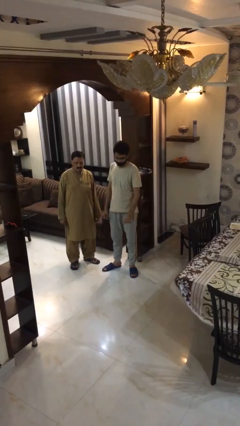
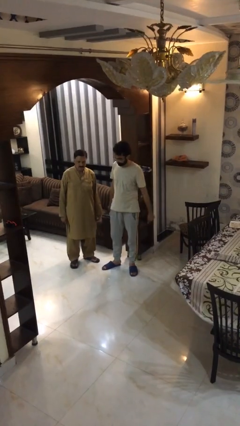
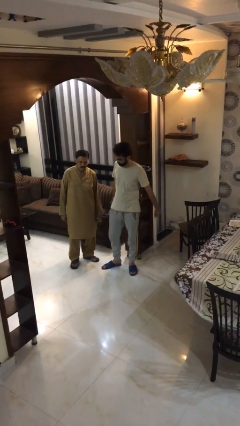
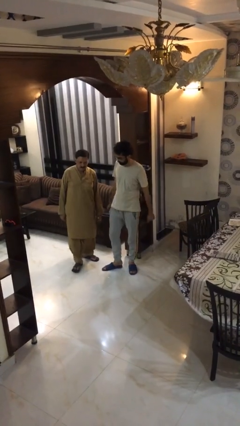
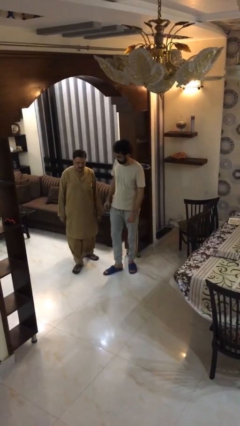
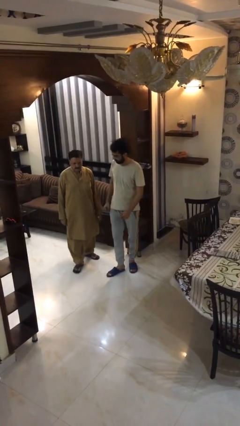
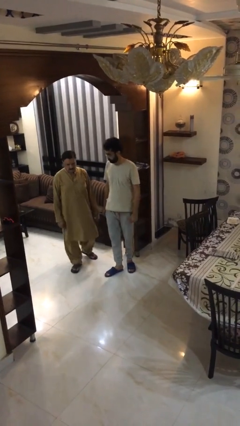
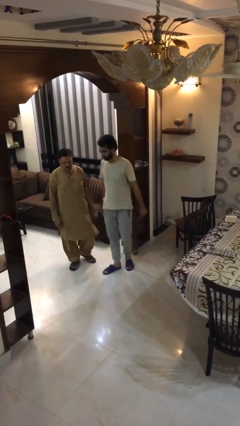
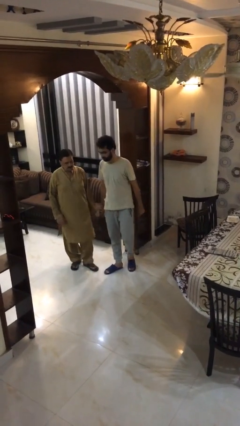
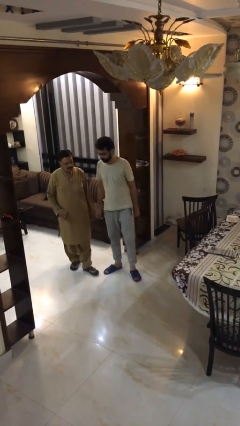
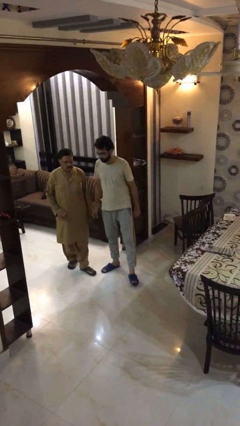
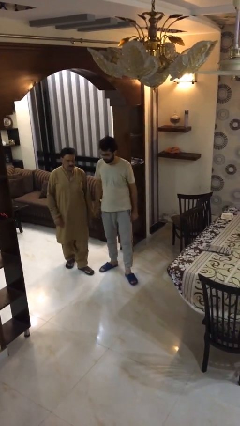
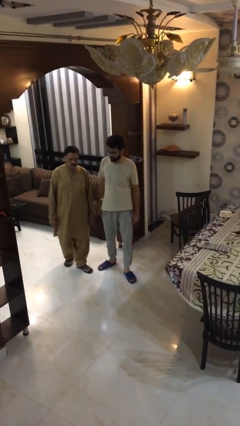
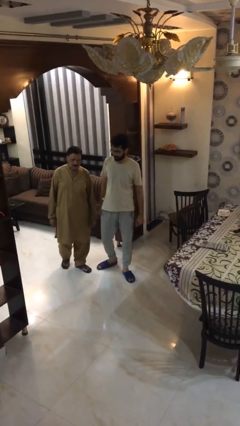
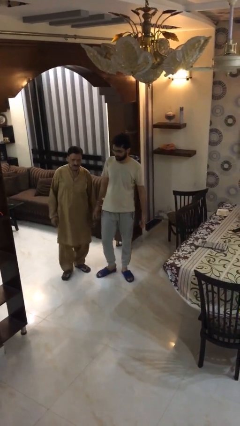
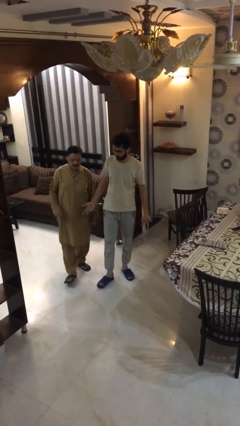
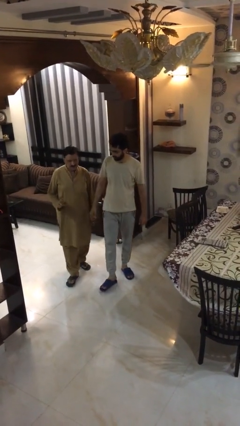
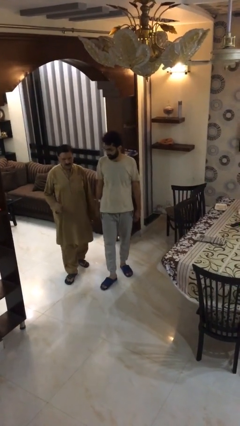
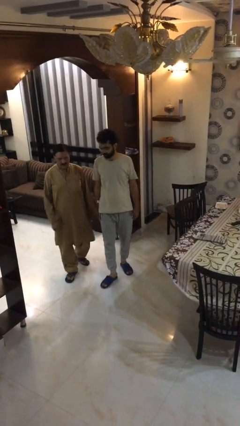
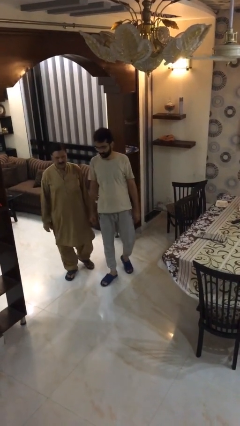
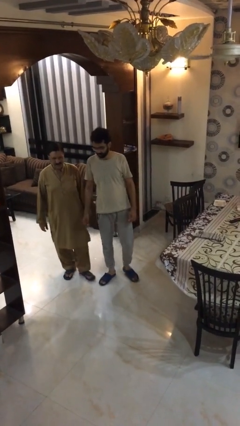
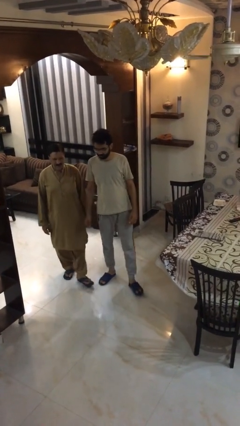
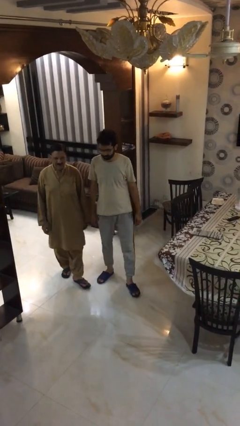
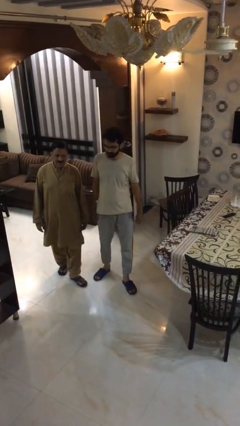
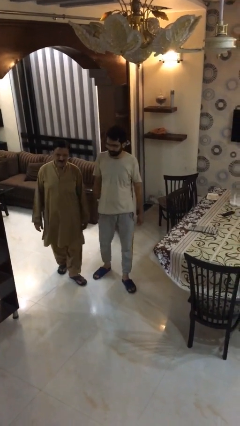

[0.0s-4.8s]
person talks to person

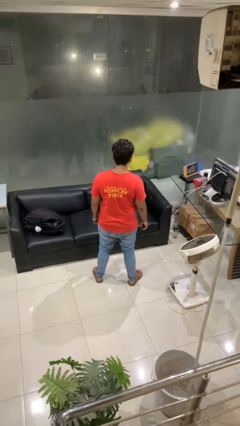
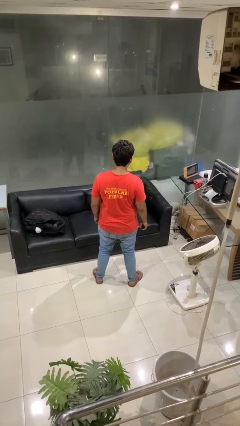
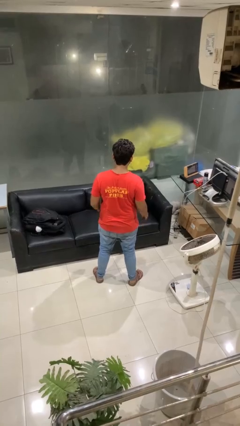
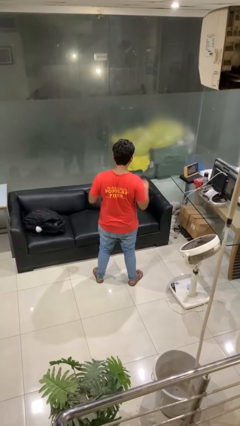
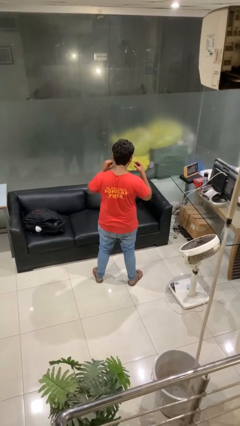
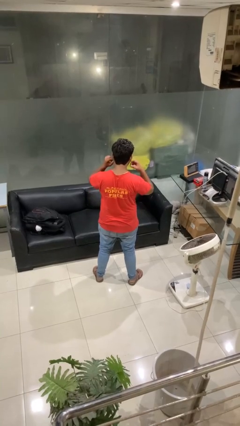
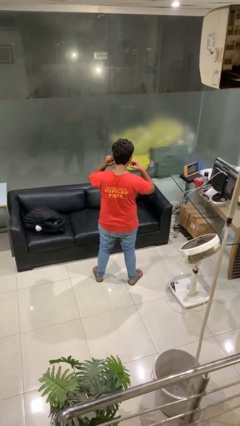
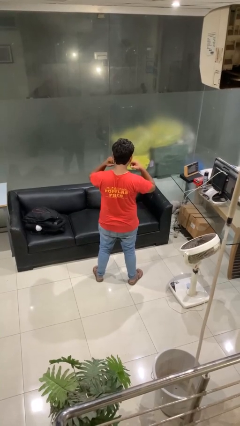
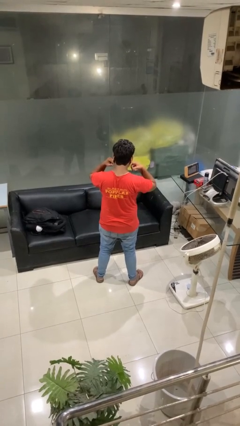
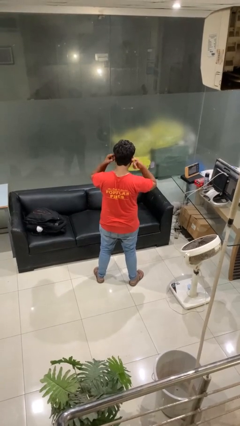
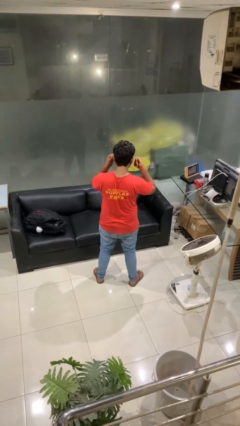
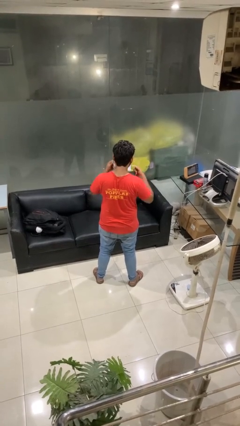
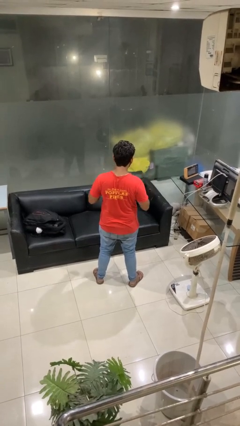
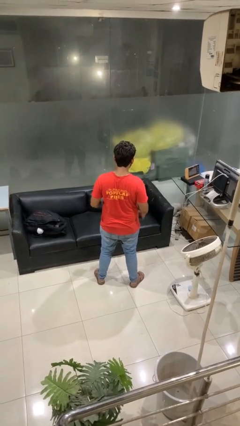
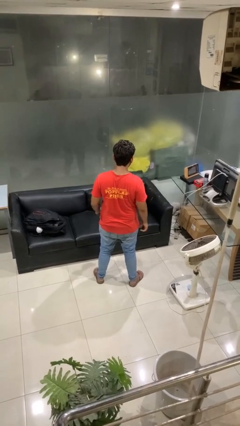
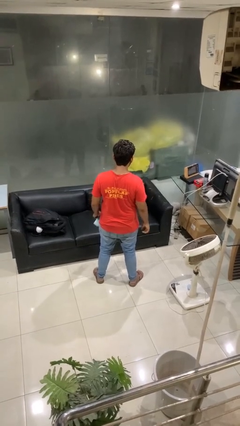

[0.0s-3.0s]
person takes off facemask

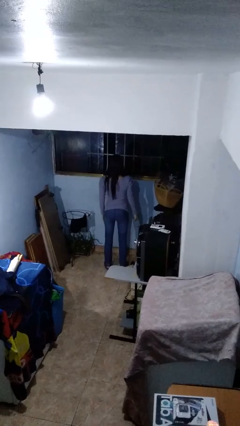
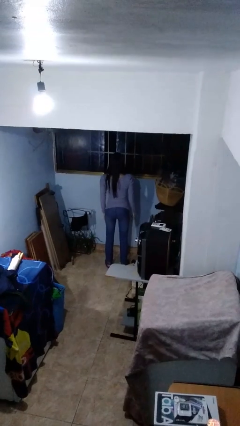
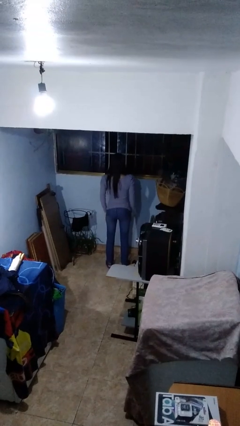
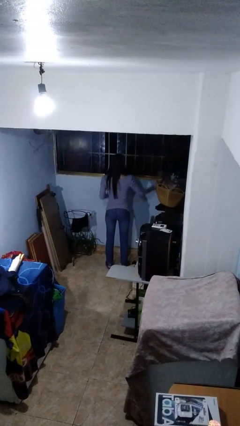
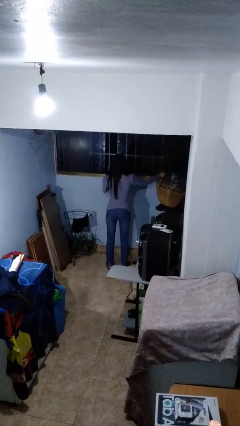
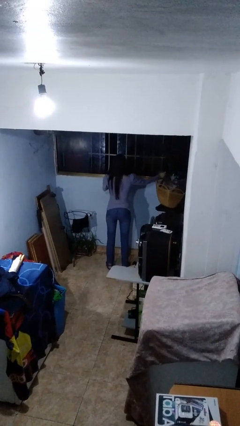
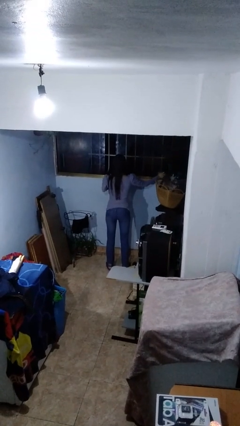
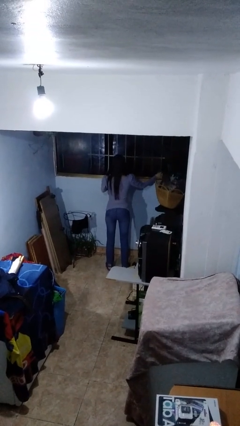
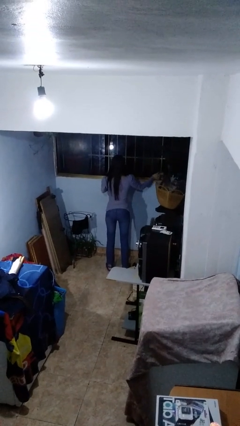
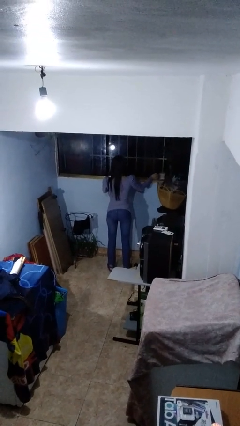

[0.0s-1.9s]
person closes home window

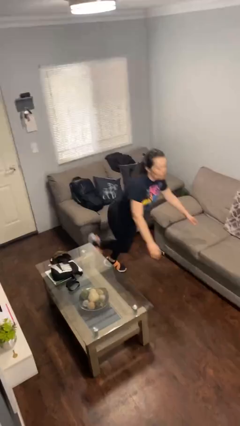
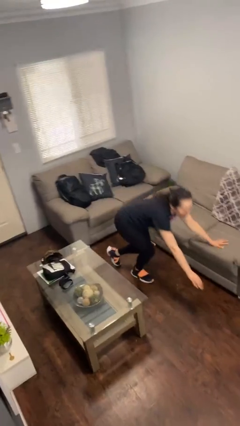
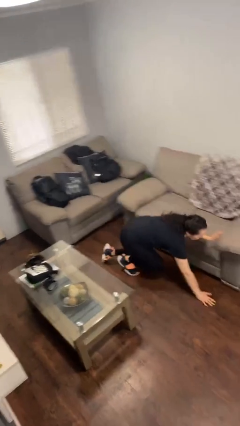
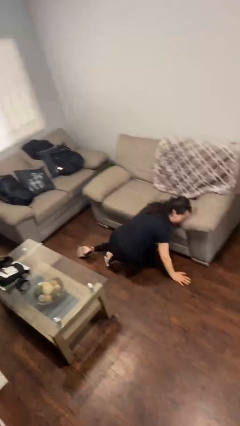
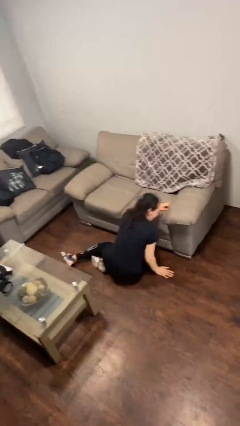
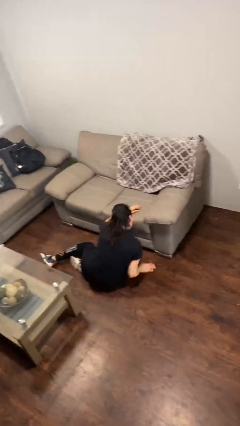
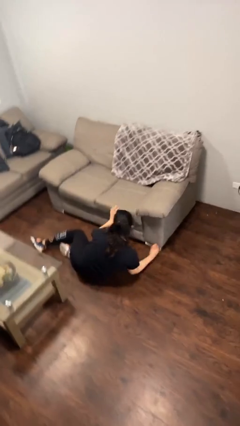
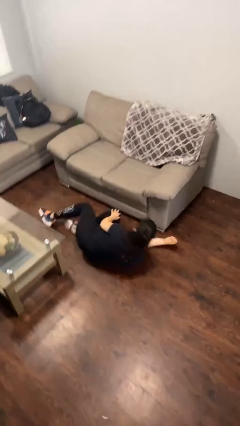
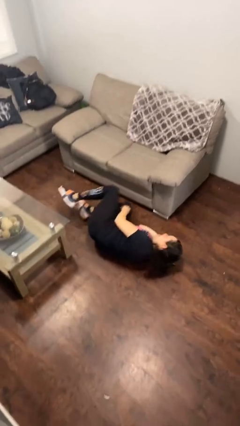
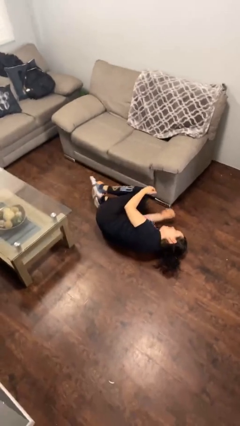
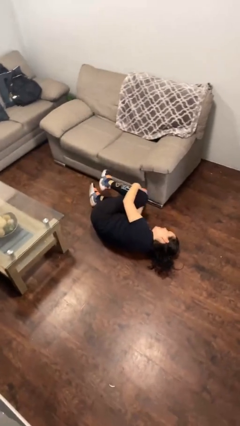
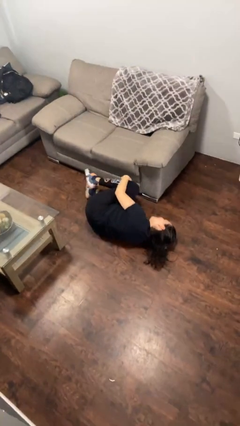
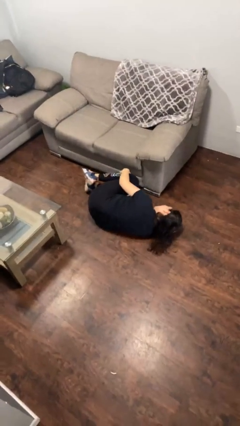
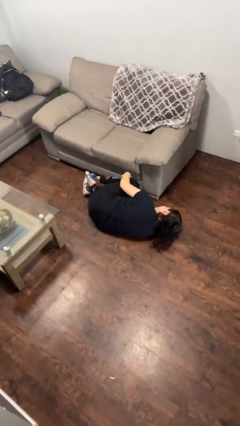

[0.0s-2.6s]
person lies down on floor

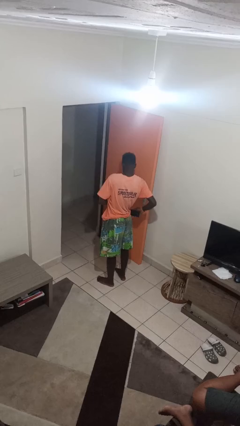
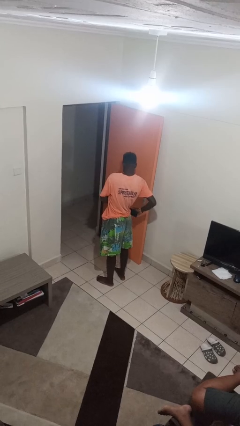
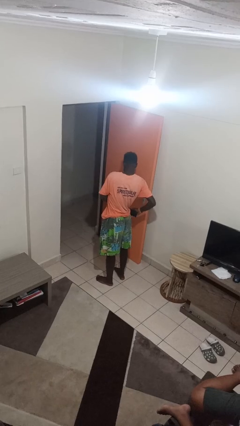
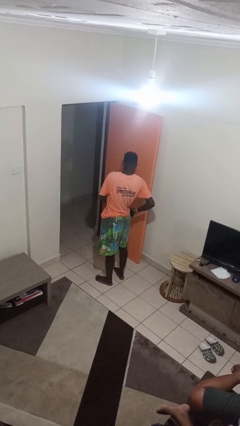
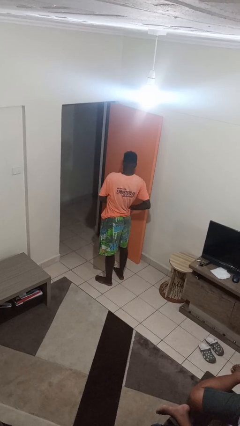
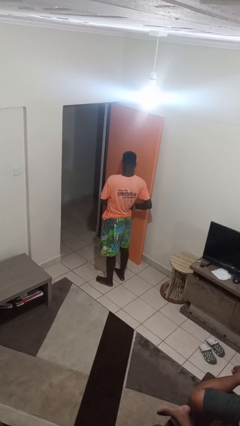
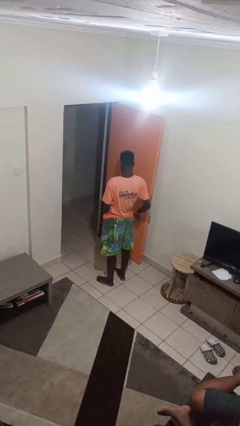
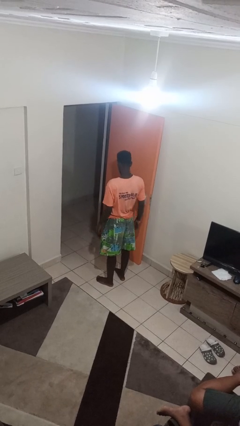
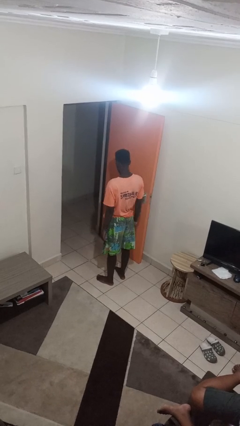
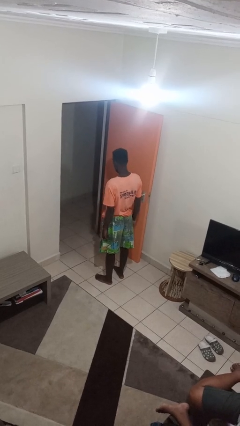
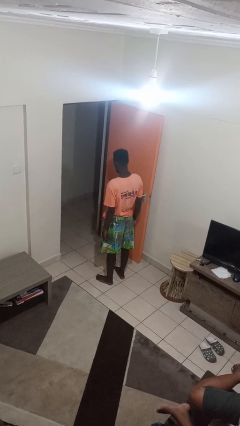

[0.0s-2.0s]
person puts phone into pocket

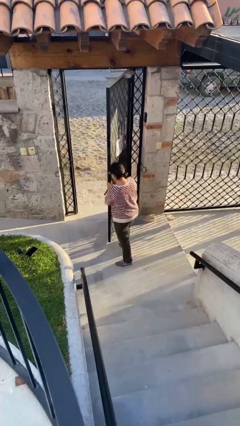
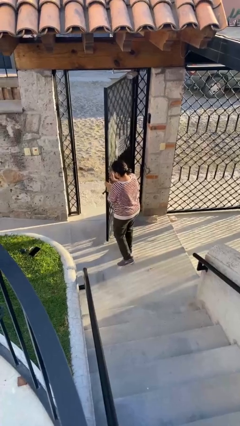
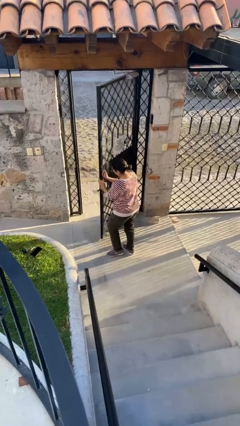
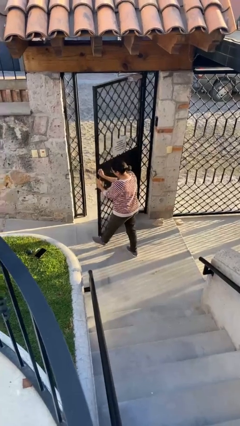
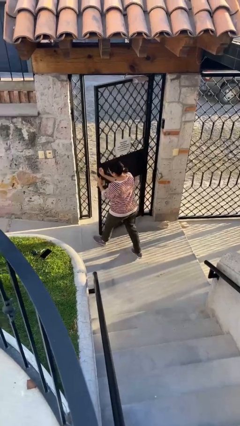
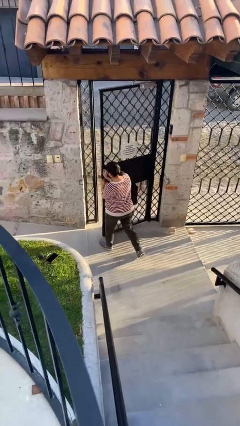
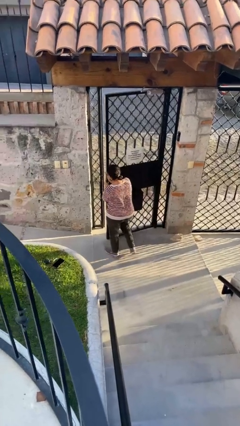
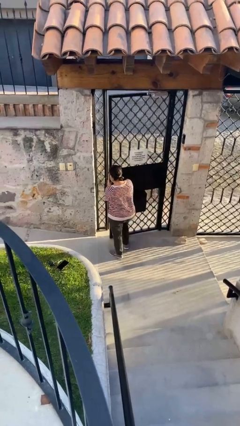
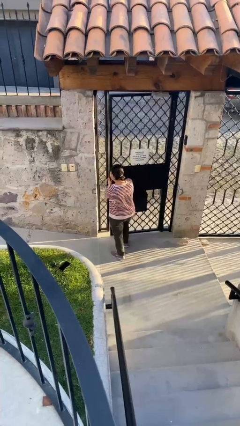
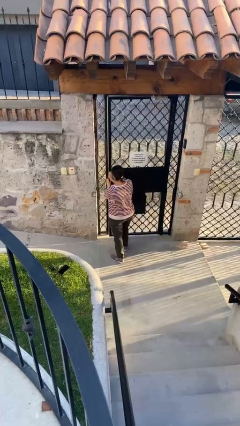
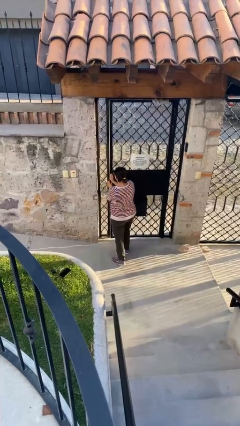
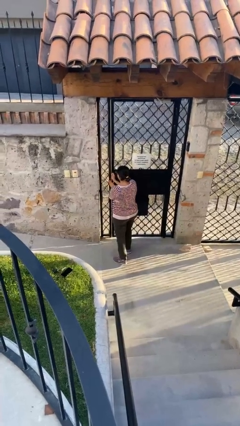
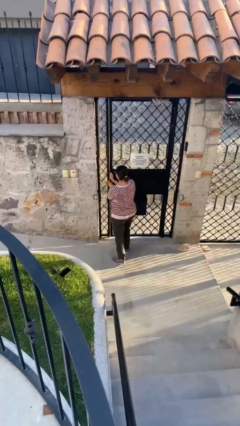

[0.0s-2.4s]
person closes facility door

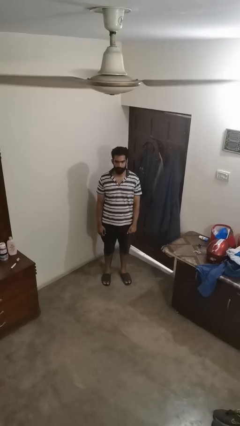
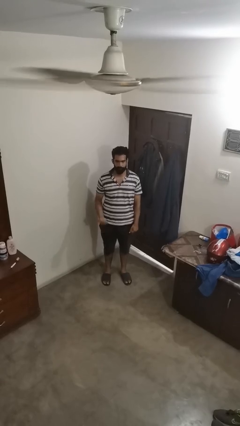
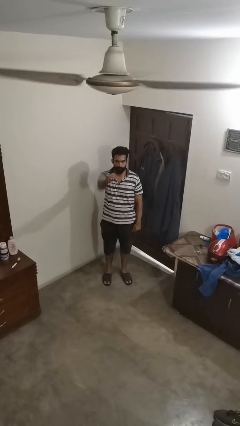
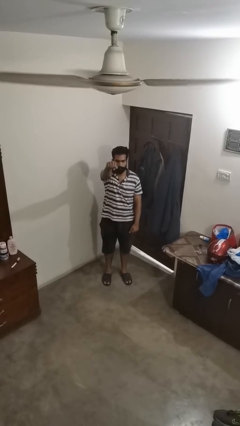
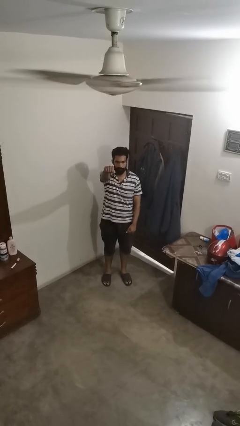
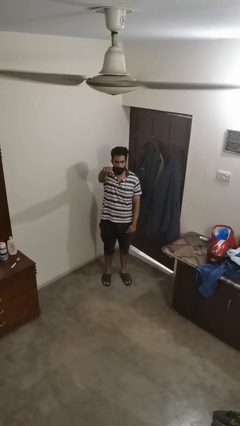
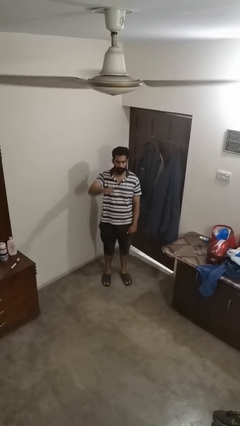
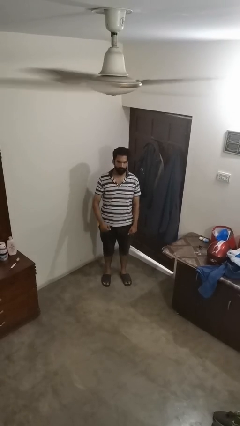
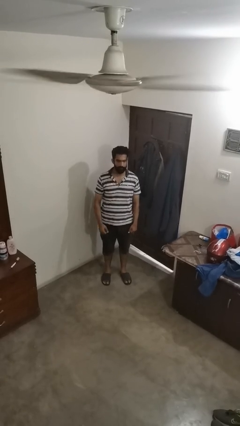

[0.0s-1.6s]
person punches
